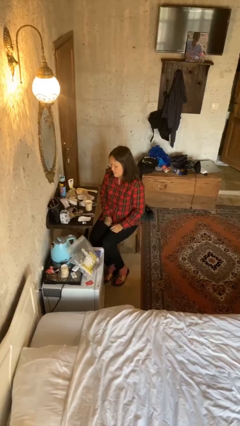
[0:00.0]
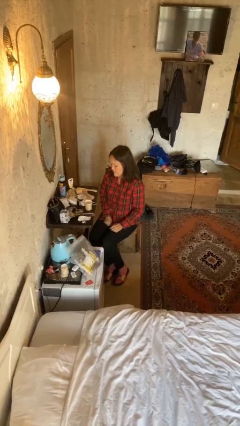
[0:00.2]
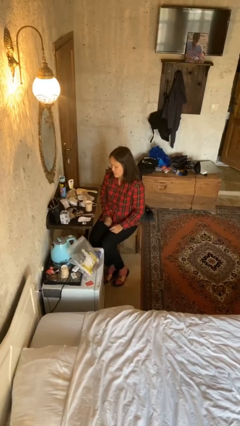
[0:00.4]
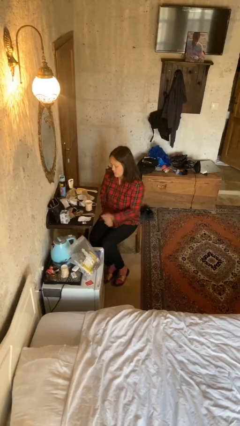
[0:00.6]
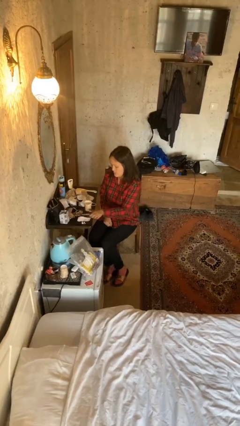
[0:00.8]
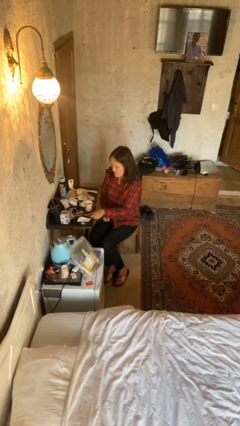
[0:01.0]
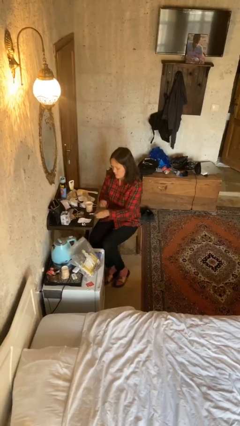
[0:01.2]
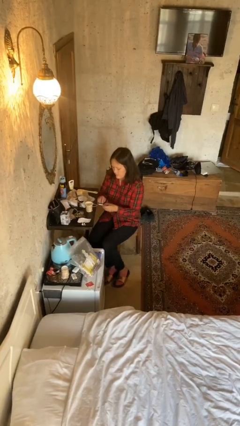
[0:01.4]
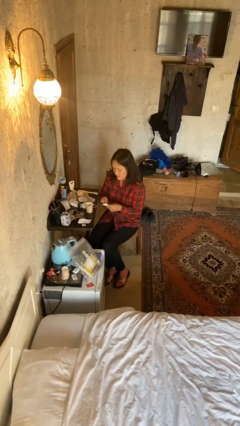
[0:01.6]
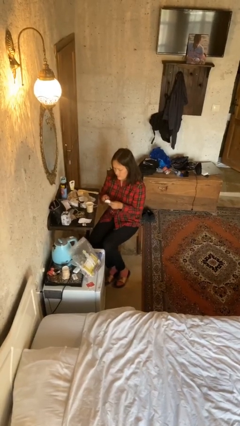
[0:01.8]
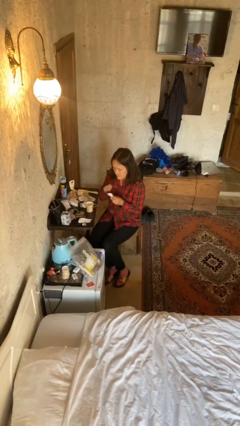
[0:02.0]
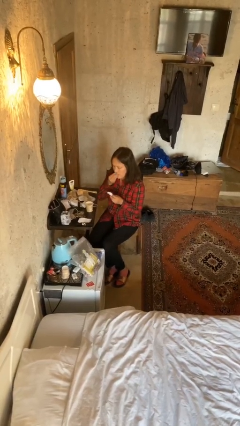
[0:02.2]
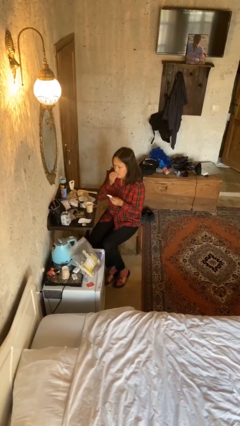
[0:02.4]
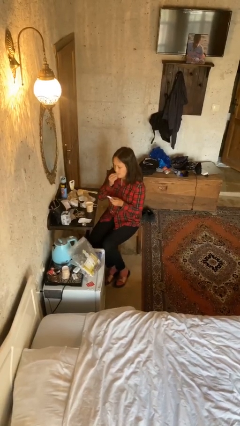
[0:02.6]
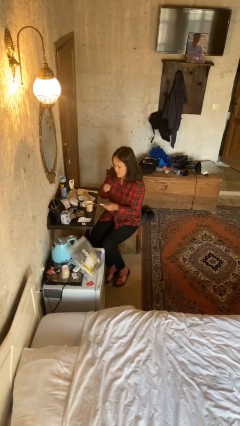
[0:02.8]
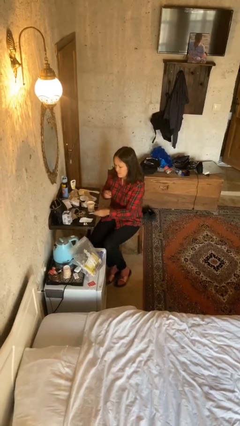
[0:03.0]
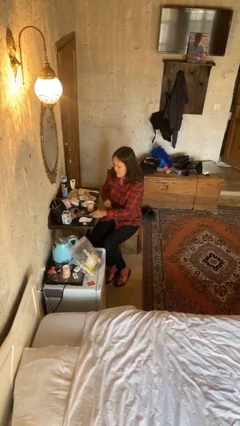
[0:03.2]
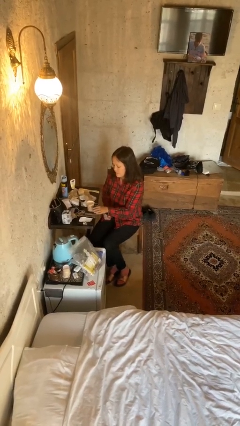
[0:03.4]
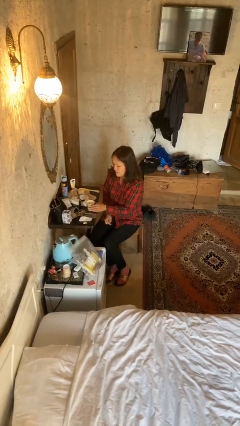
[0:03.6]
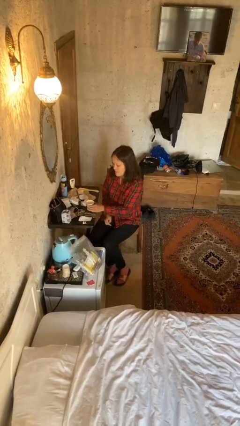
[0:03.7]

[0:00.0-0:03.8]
person takes medicine pills

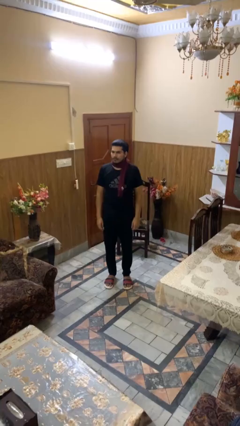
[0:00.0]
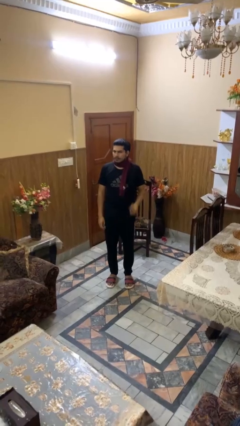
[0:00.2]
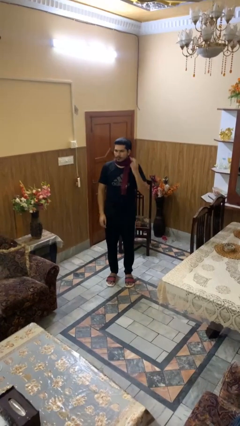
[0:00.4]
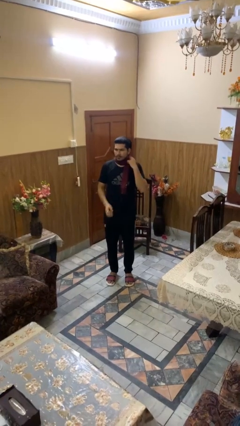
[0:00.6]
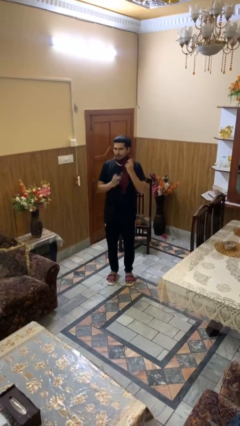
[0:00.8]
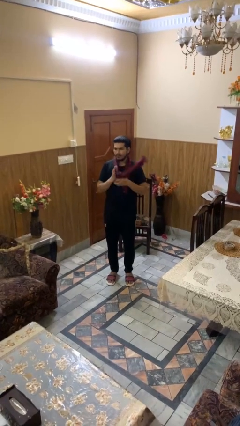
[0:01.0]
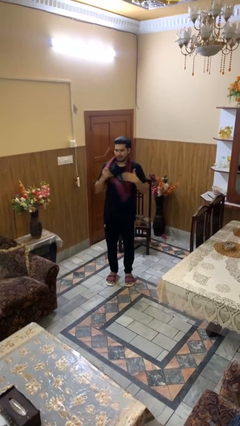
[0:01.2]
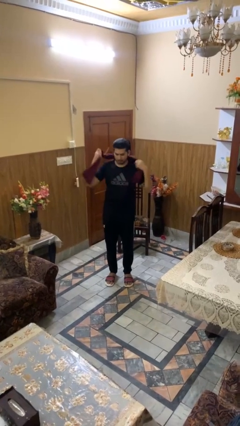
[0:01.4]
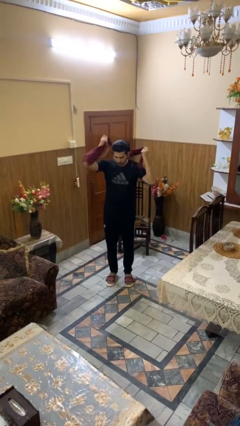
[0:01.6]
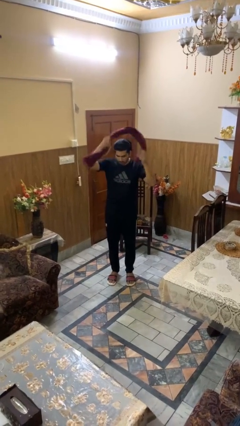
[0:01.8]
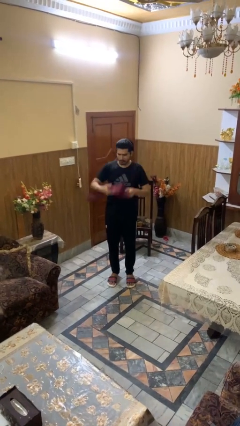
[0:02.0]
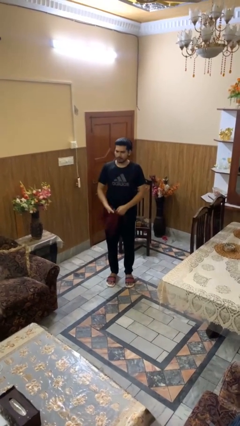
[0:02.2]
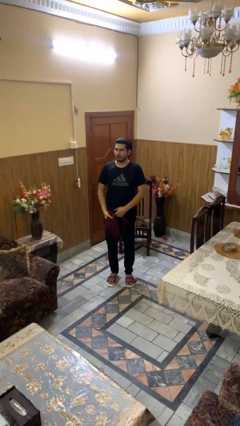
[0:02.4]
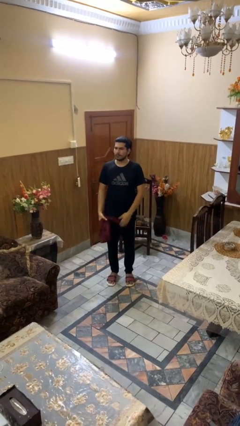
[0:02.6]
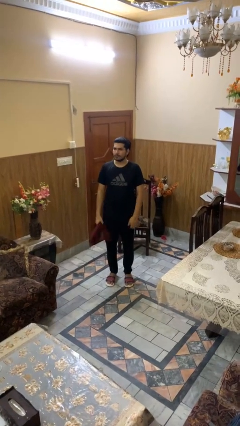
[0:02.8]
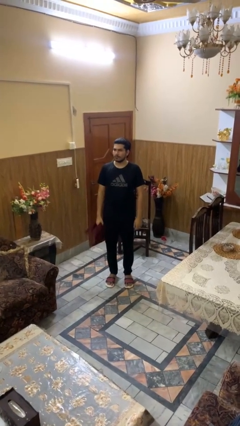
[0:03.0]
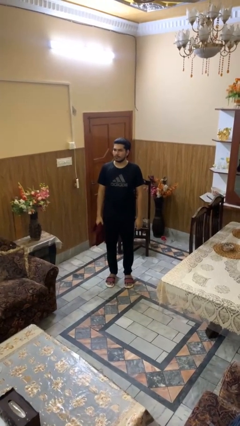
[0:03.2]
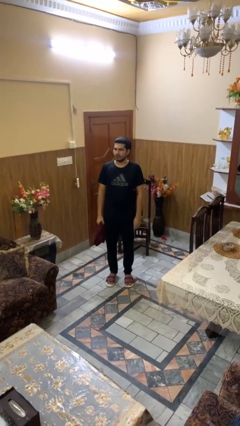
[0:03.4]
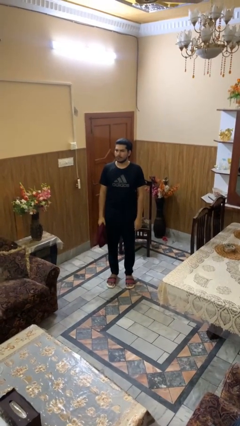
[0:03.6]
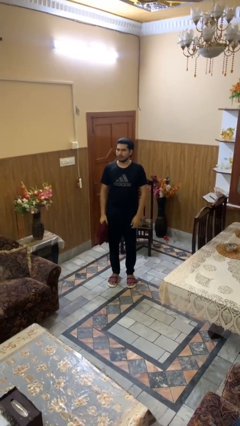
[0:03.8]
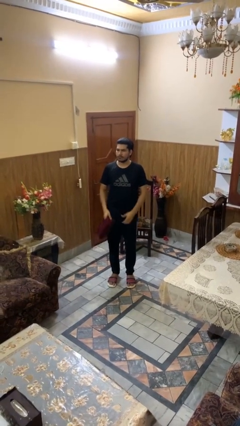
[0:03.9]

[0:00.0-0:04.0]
person takes off scarf

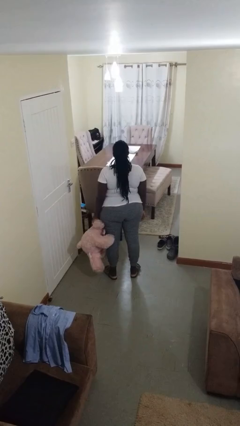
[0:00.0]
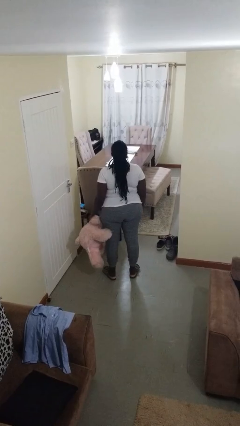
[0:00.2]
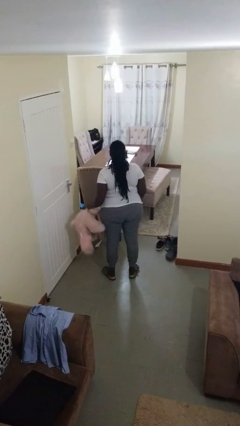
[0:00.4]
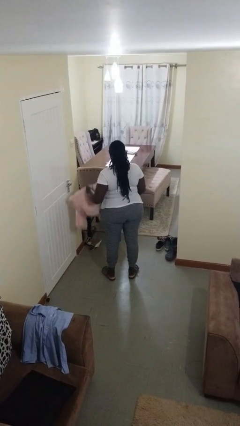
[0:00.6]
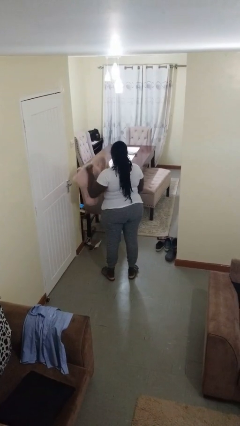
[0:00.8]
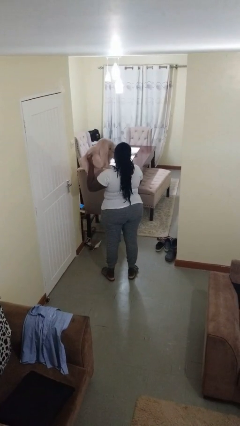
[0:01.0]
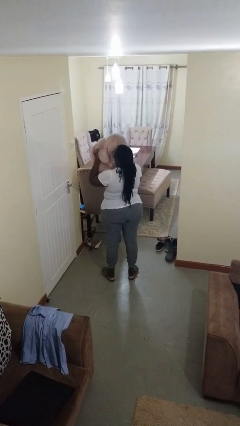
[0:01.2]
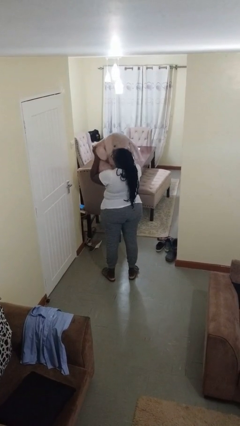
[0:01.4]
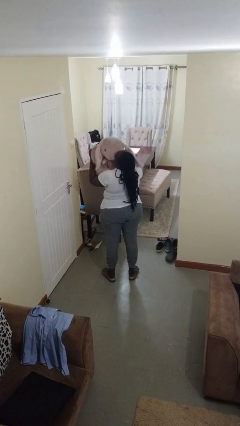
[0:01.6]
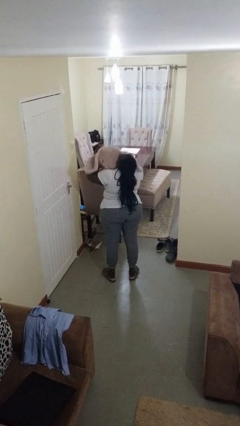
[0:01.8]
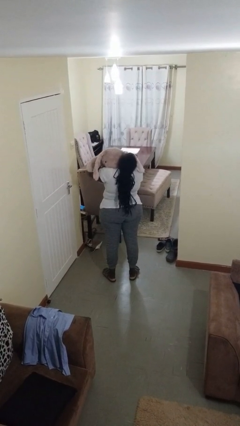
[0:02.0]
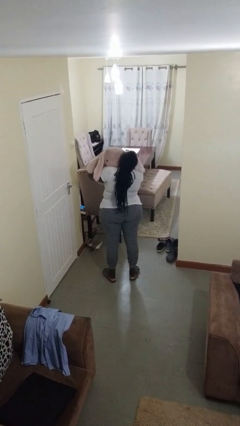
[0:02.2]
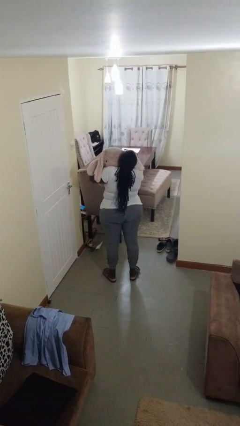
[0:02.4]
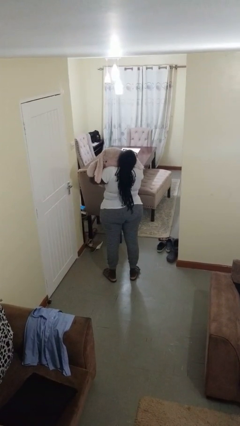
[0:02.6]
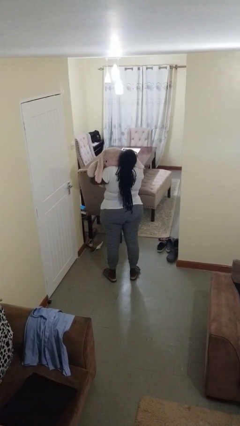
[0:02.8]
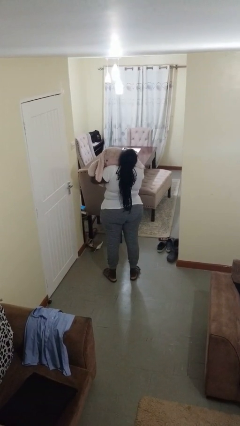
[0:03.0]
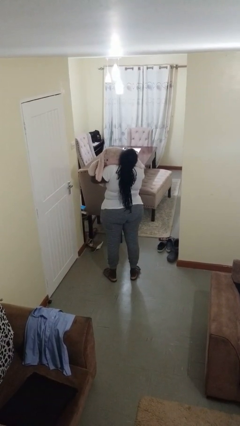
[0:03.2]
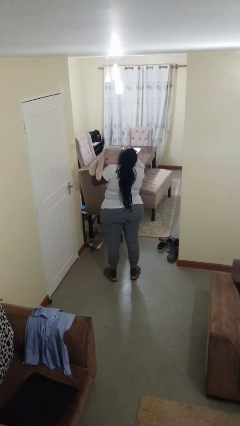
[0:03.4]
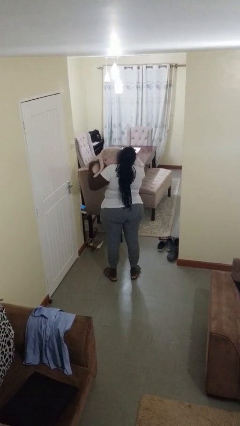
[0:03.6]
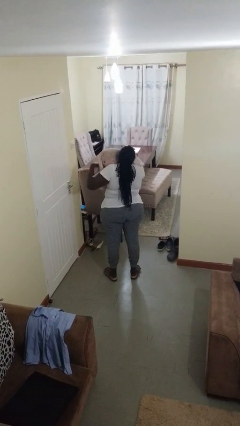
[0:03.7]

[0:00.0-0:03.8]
person hugs stuffed animal

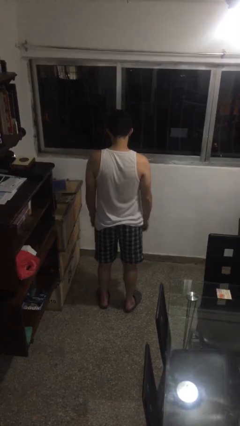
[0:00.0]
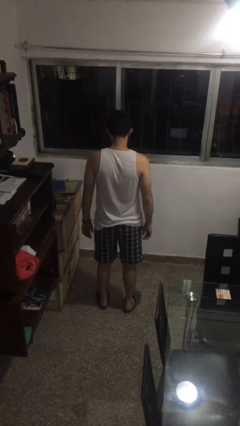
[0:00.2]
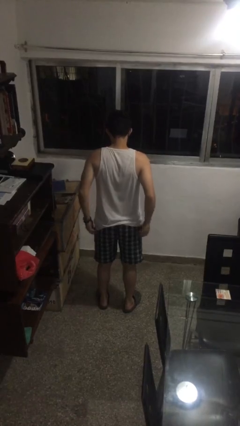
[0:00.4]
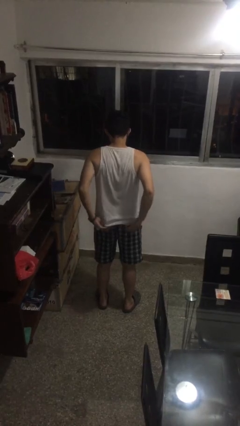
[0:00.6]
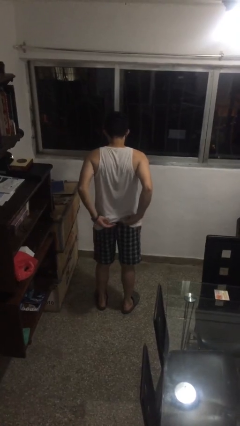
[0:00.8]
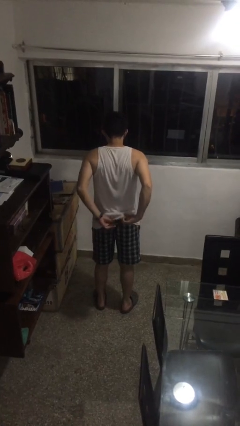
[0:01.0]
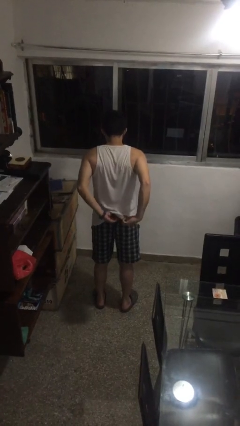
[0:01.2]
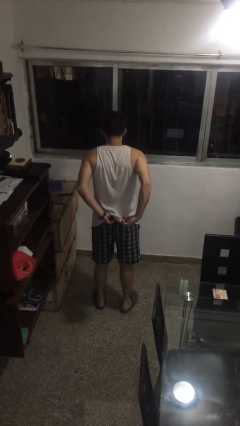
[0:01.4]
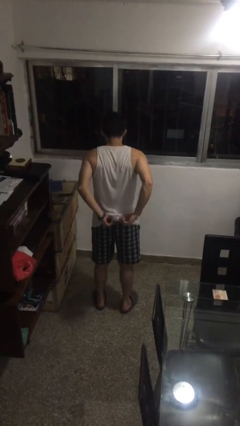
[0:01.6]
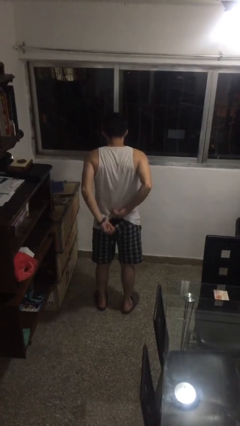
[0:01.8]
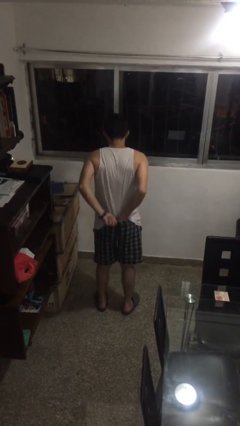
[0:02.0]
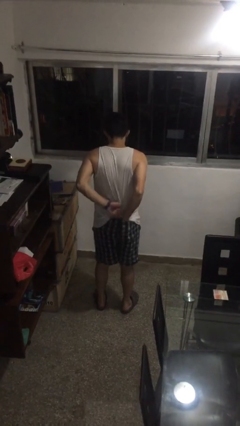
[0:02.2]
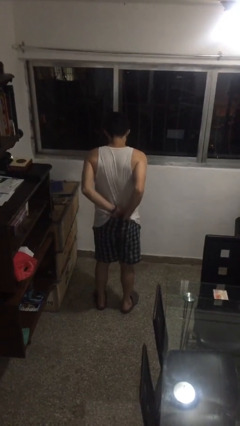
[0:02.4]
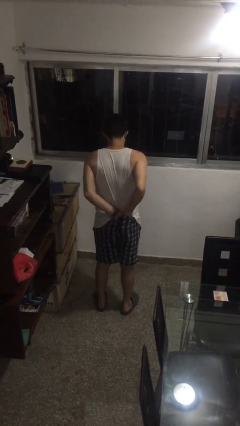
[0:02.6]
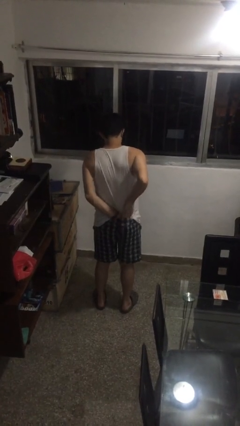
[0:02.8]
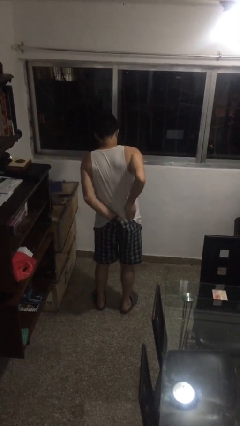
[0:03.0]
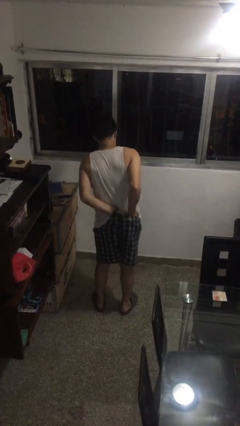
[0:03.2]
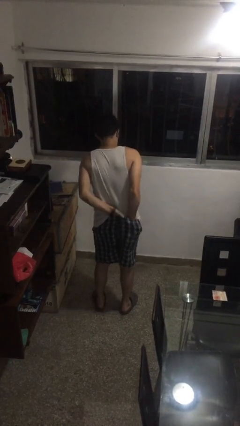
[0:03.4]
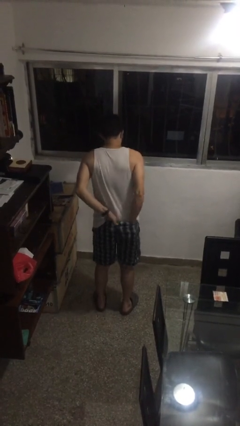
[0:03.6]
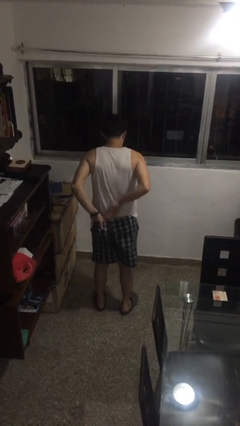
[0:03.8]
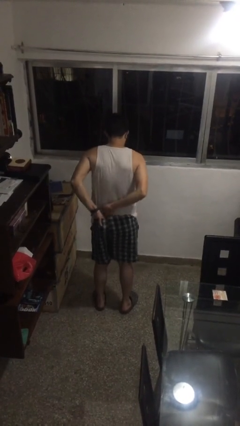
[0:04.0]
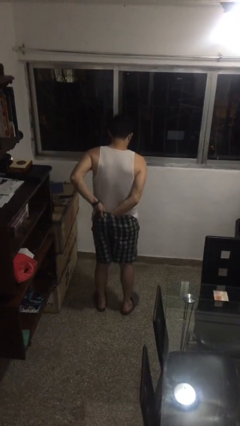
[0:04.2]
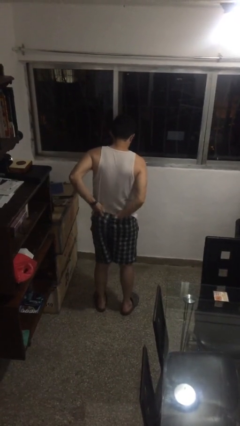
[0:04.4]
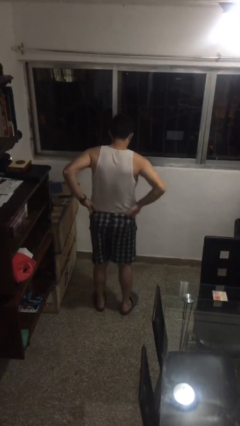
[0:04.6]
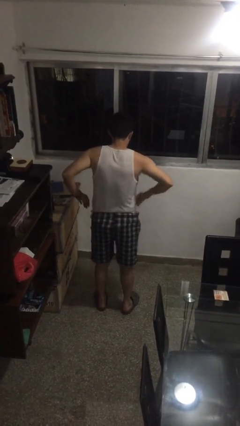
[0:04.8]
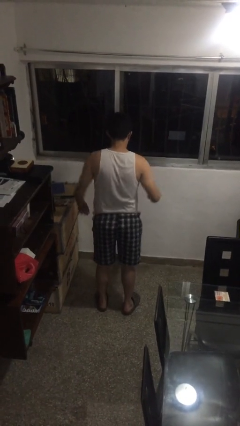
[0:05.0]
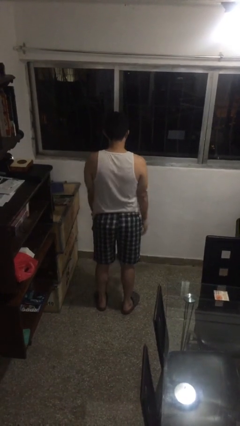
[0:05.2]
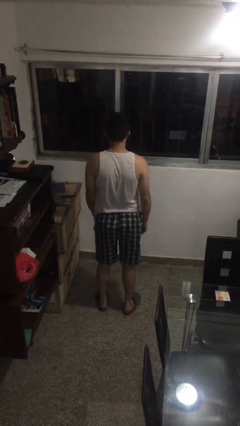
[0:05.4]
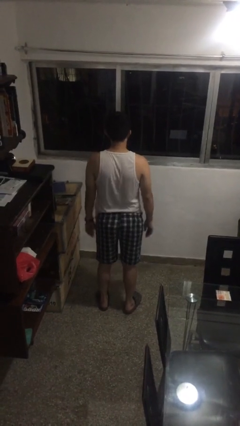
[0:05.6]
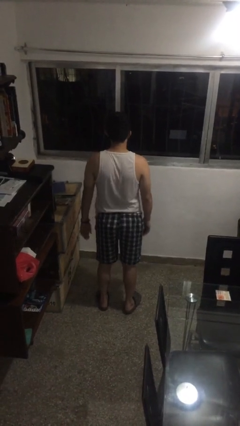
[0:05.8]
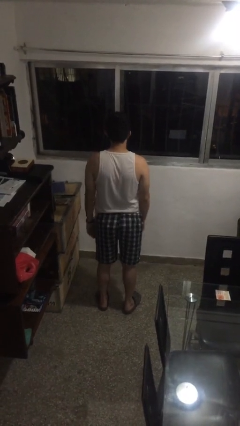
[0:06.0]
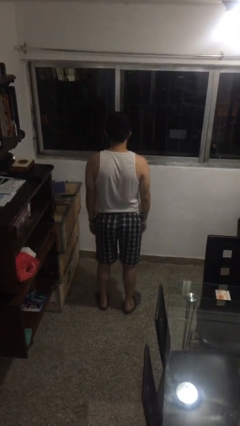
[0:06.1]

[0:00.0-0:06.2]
person tucks in shirt
